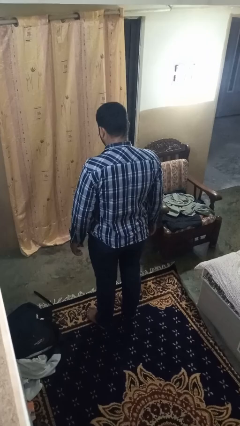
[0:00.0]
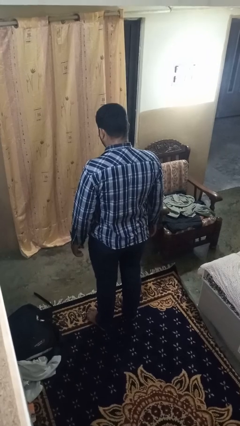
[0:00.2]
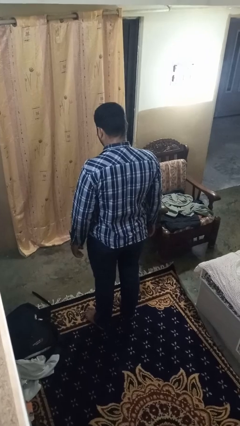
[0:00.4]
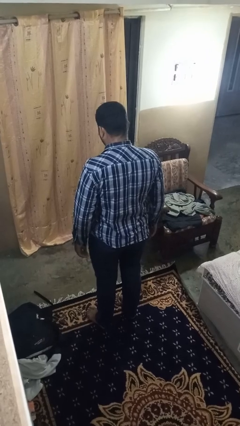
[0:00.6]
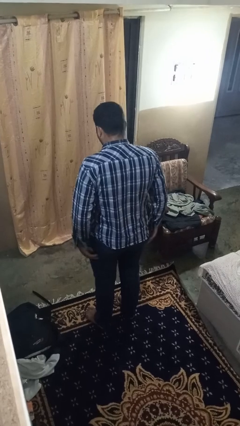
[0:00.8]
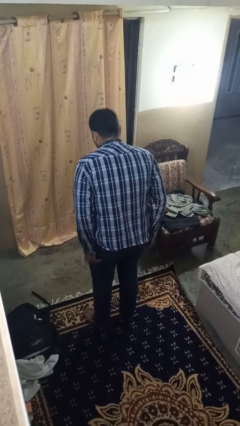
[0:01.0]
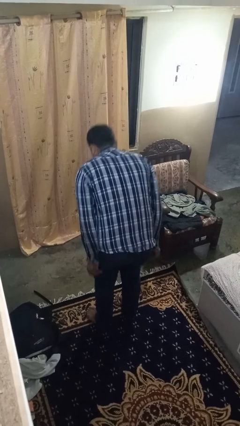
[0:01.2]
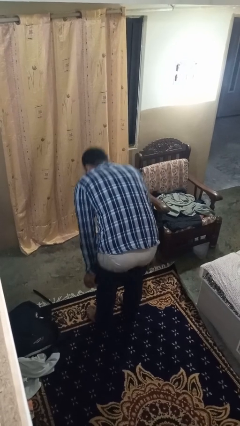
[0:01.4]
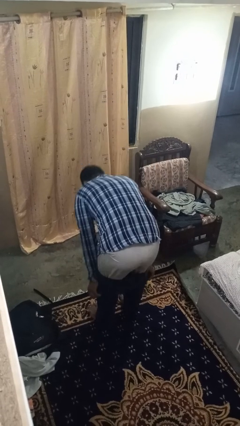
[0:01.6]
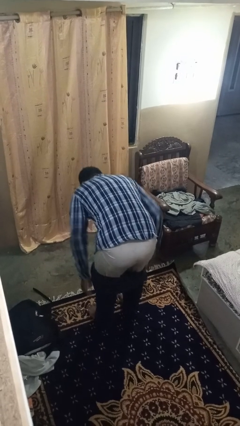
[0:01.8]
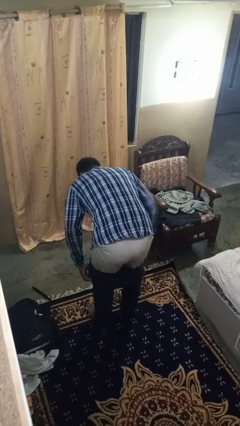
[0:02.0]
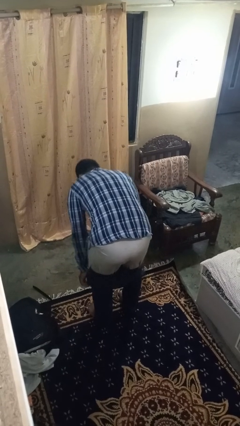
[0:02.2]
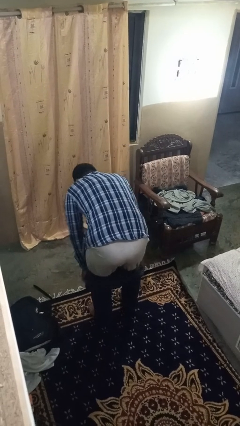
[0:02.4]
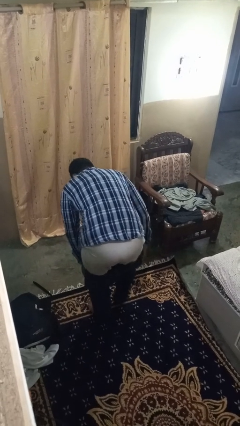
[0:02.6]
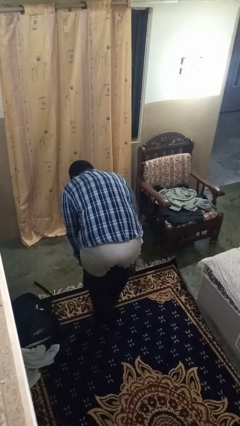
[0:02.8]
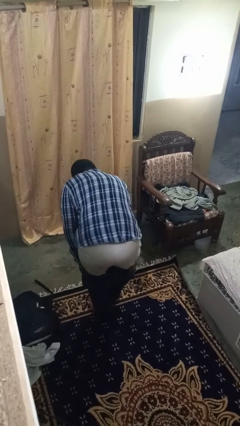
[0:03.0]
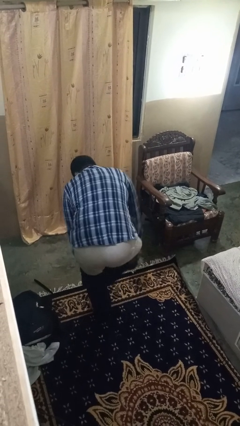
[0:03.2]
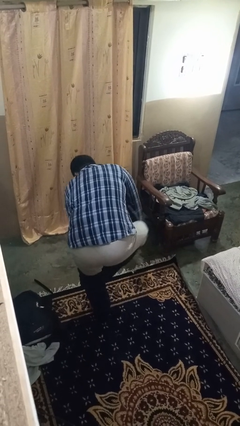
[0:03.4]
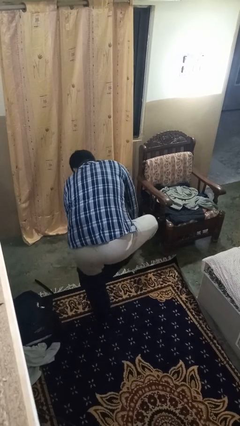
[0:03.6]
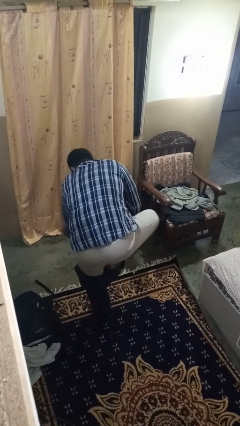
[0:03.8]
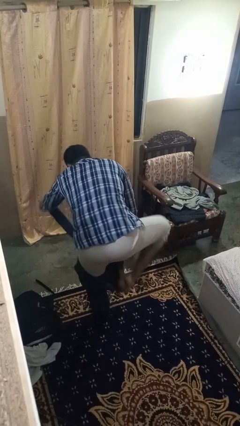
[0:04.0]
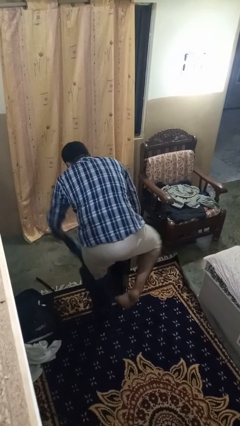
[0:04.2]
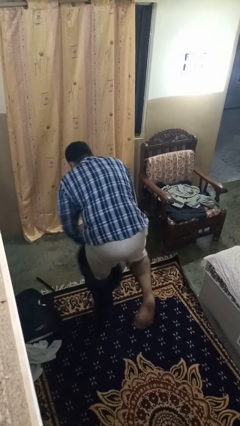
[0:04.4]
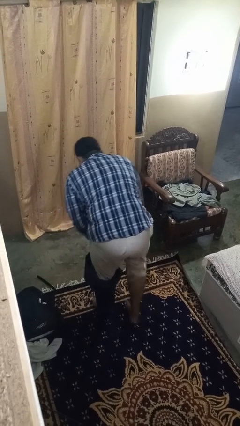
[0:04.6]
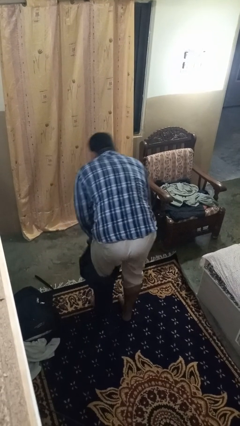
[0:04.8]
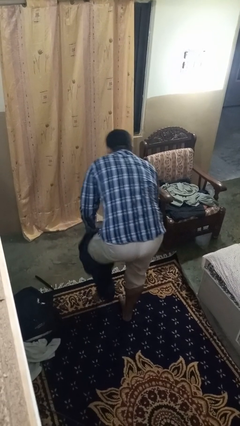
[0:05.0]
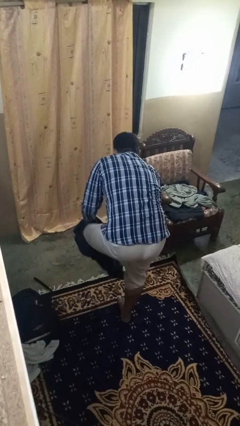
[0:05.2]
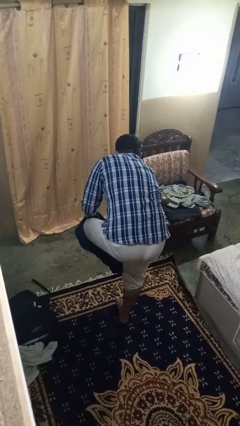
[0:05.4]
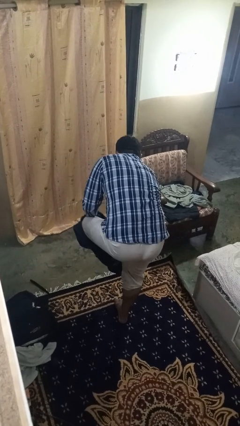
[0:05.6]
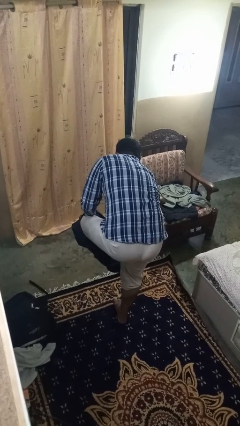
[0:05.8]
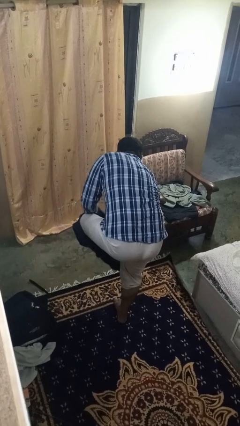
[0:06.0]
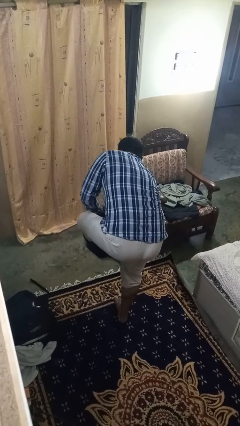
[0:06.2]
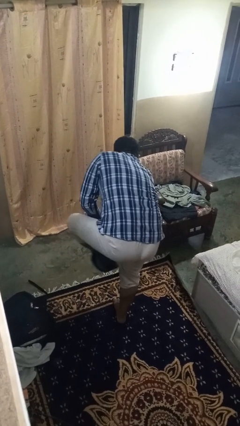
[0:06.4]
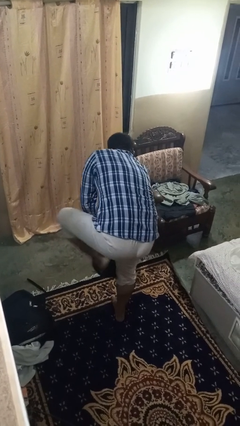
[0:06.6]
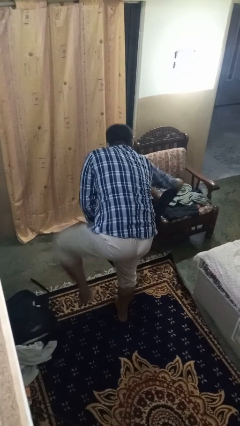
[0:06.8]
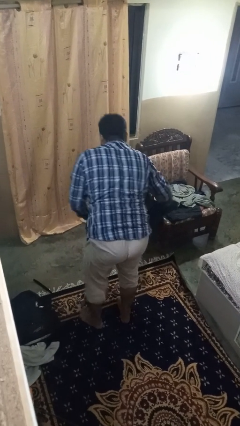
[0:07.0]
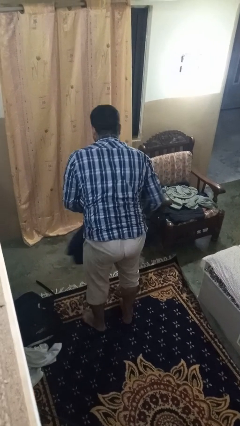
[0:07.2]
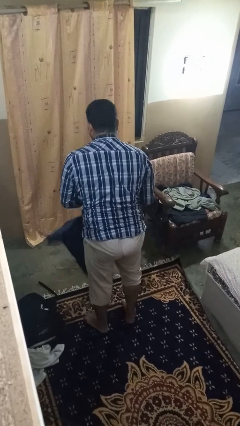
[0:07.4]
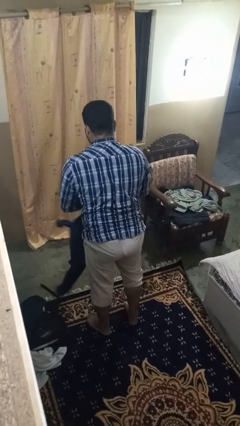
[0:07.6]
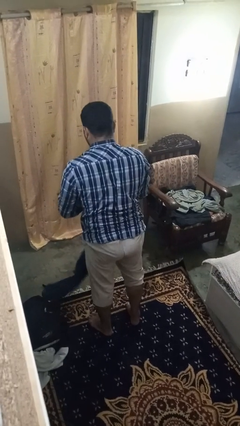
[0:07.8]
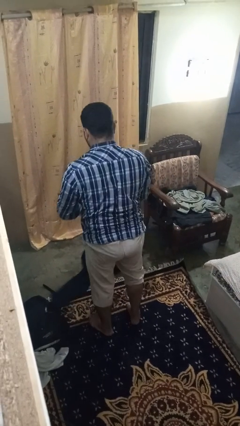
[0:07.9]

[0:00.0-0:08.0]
person takes off pants

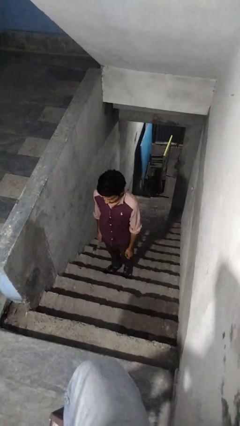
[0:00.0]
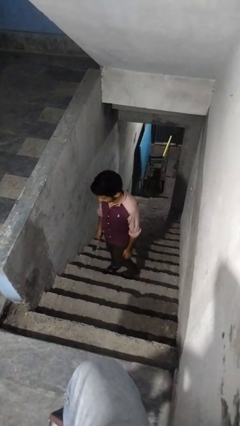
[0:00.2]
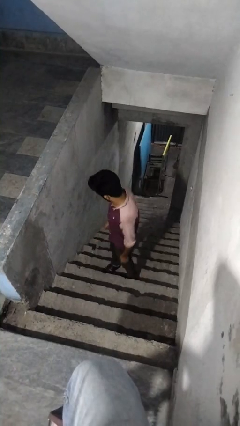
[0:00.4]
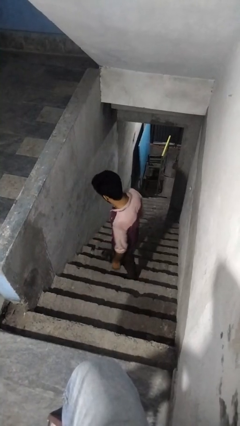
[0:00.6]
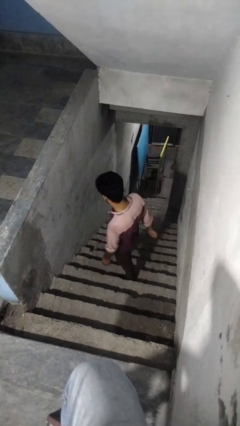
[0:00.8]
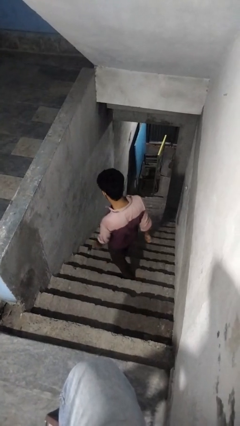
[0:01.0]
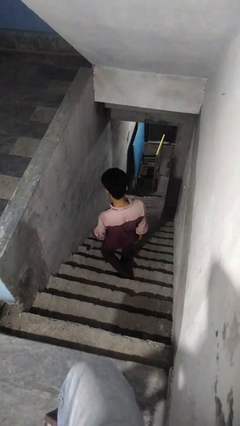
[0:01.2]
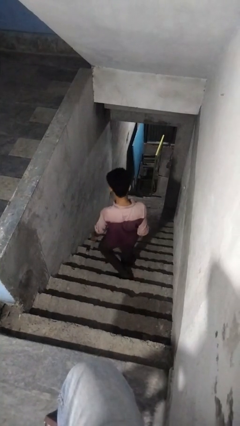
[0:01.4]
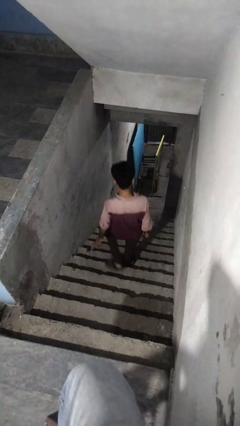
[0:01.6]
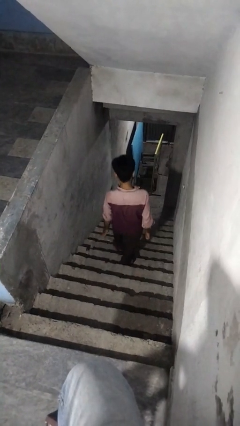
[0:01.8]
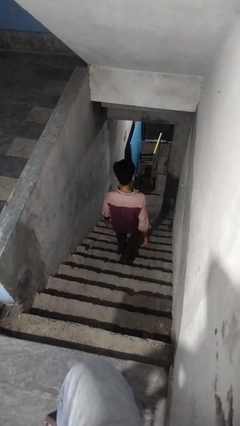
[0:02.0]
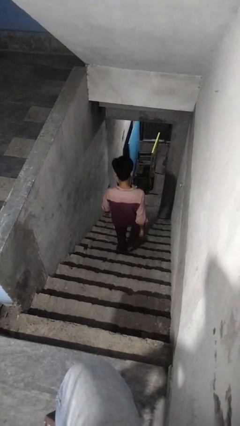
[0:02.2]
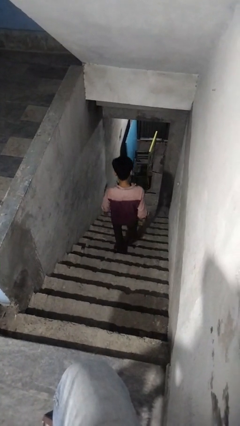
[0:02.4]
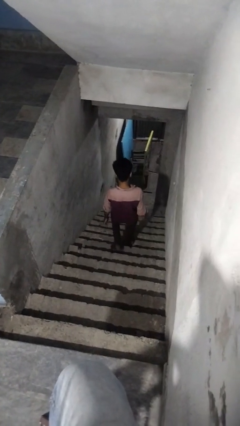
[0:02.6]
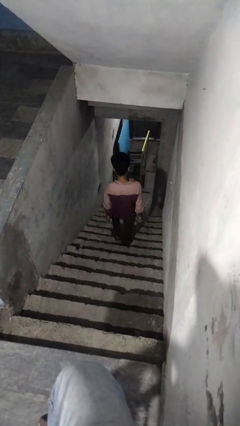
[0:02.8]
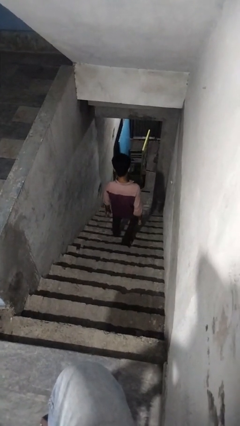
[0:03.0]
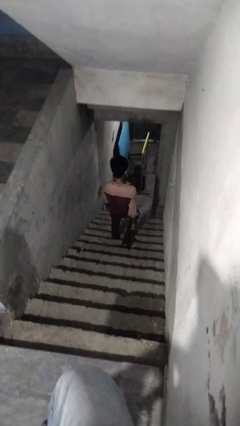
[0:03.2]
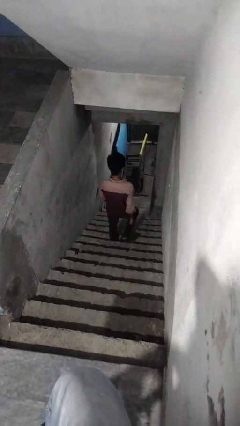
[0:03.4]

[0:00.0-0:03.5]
person climbs down stairs

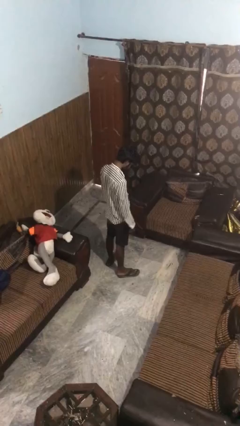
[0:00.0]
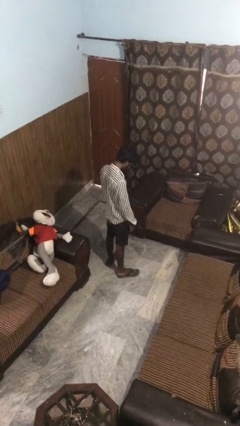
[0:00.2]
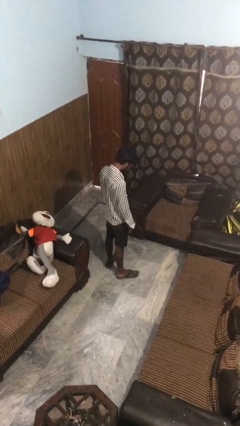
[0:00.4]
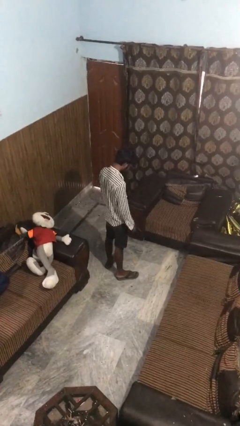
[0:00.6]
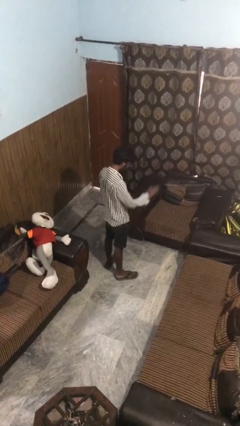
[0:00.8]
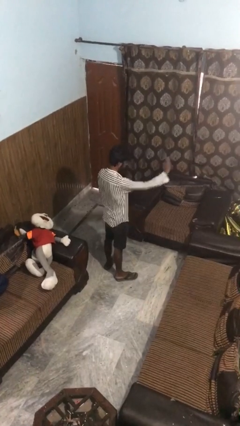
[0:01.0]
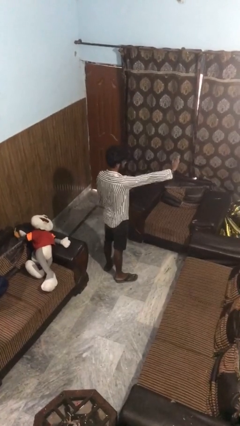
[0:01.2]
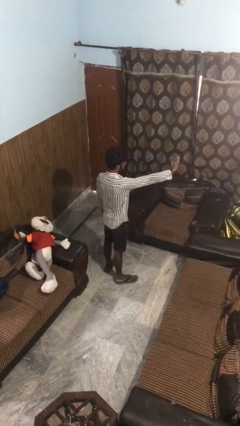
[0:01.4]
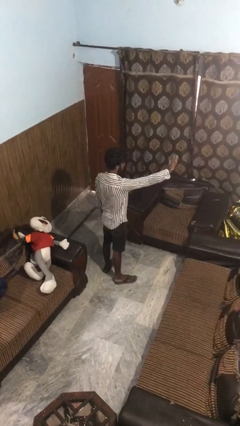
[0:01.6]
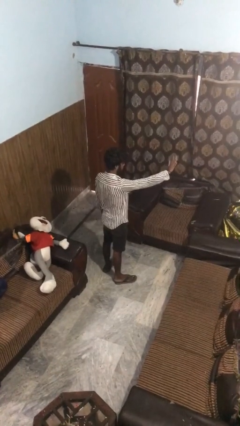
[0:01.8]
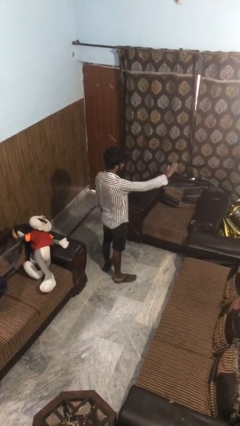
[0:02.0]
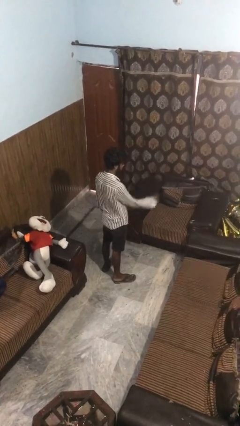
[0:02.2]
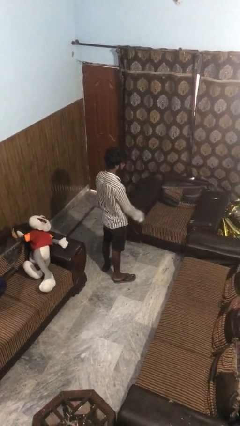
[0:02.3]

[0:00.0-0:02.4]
person gestures stop

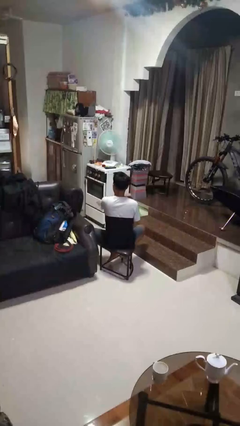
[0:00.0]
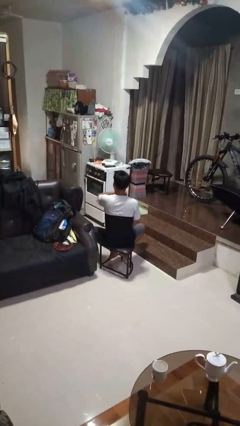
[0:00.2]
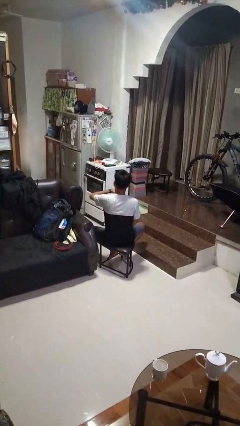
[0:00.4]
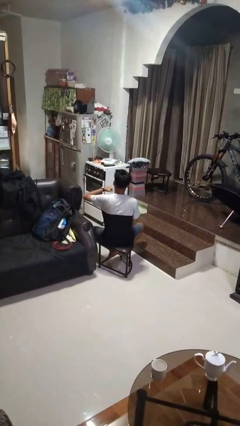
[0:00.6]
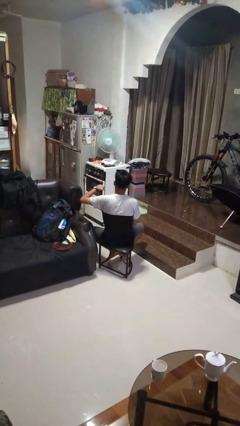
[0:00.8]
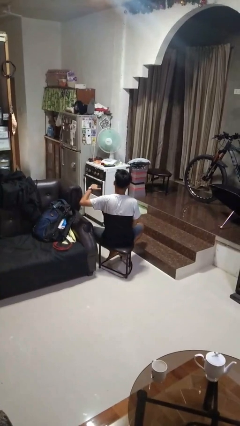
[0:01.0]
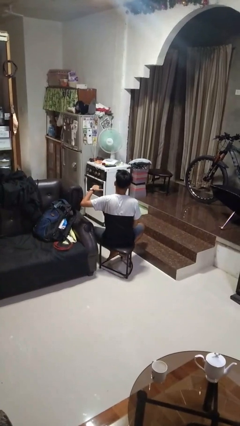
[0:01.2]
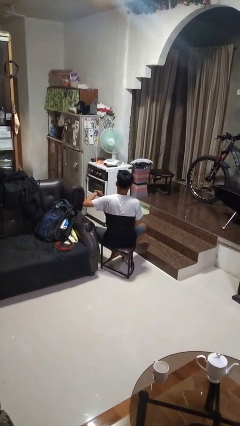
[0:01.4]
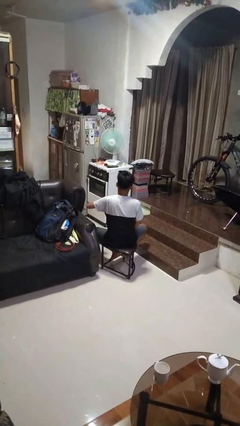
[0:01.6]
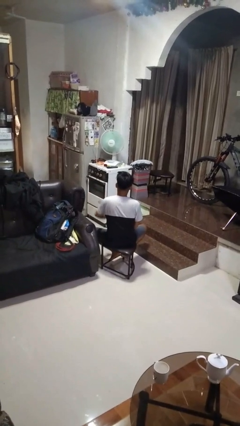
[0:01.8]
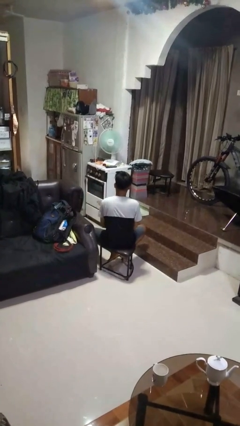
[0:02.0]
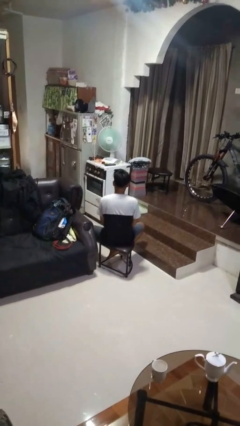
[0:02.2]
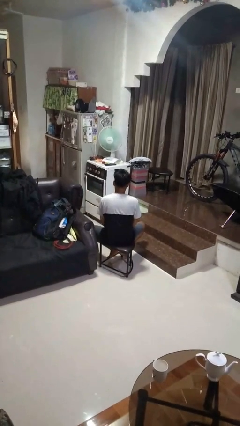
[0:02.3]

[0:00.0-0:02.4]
person gestures cut

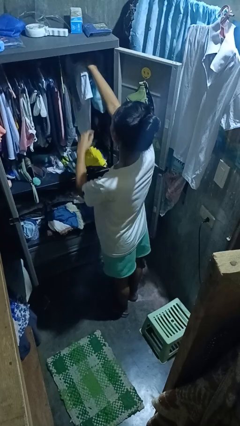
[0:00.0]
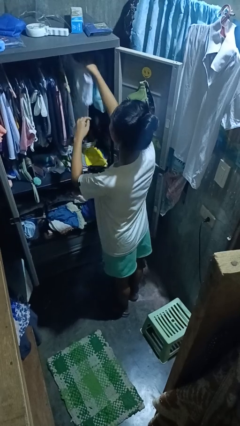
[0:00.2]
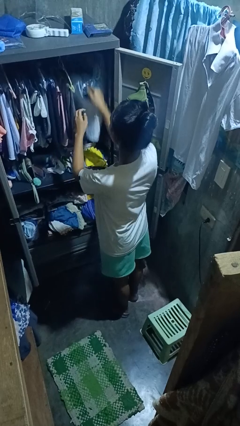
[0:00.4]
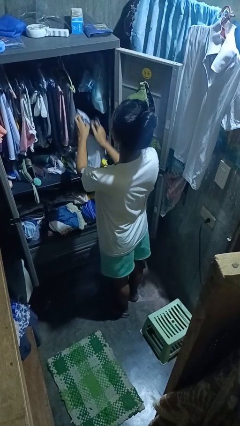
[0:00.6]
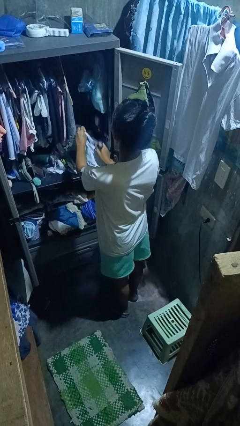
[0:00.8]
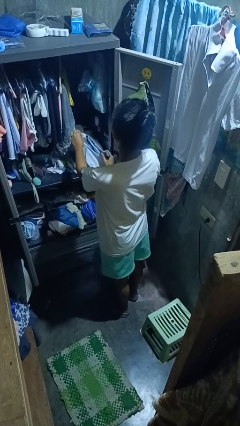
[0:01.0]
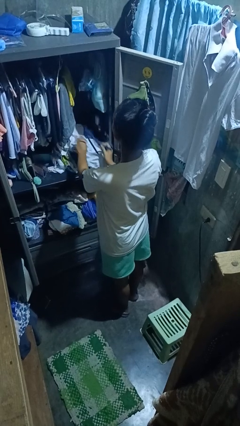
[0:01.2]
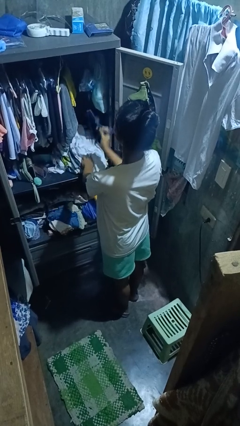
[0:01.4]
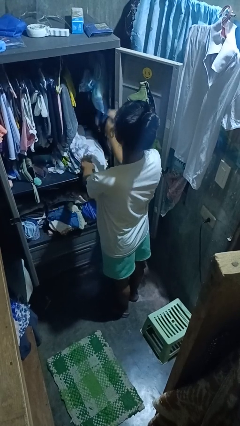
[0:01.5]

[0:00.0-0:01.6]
person takes clothes from closet
